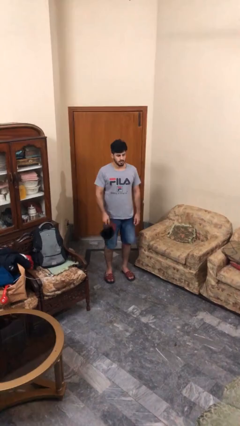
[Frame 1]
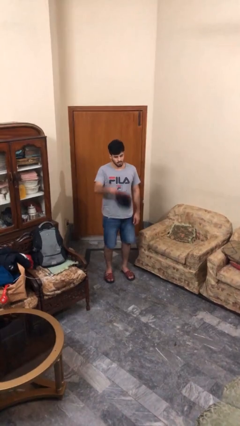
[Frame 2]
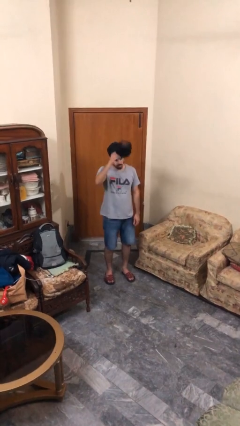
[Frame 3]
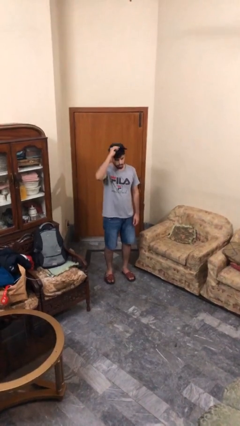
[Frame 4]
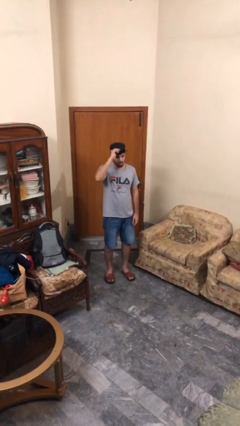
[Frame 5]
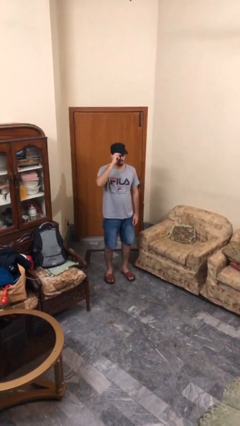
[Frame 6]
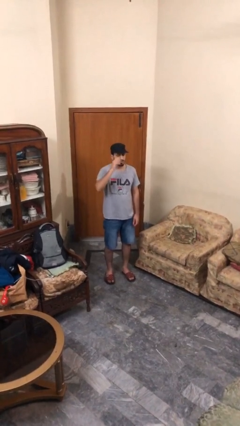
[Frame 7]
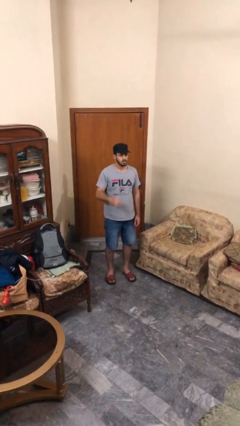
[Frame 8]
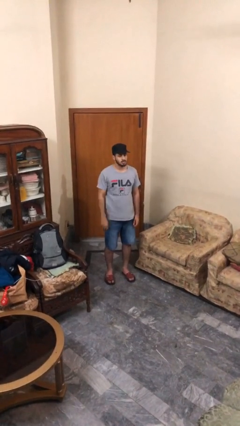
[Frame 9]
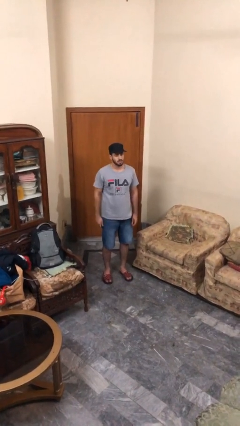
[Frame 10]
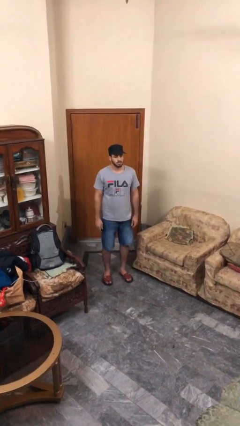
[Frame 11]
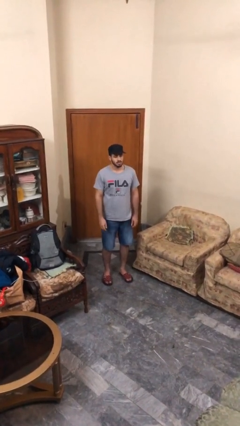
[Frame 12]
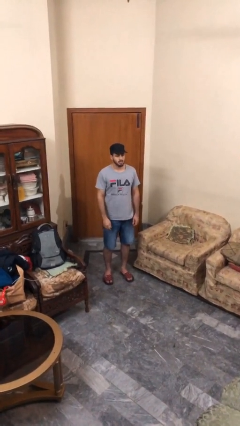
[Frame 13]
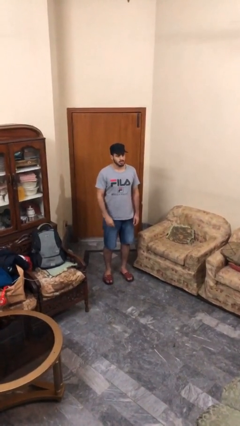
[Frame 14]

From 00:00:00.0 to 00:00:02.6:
person puts on hat

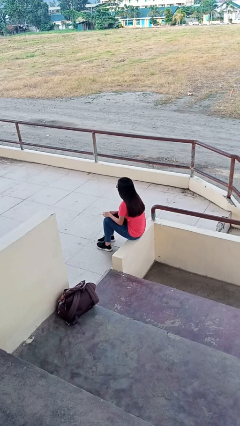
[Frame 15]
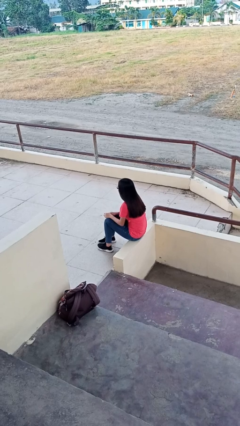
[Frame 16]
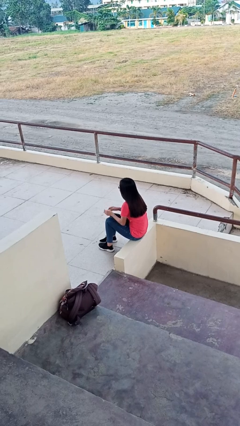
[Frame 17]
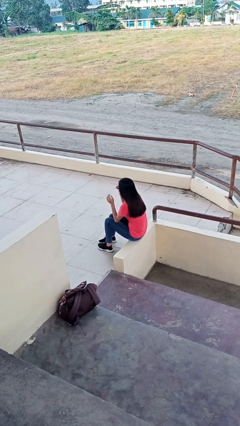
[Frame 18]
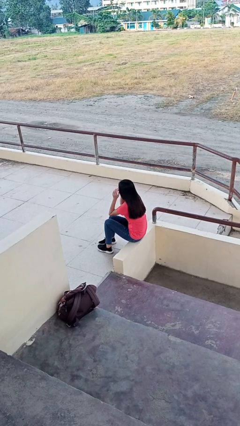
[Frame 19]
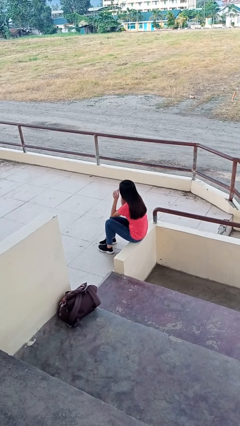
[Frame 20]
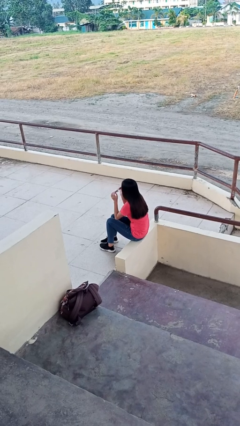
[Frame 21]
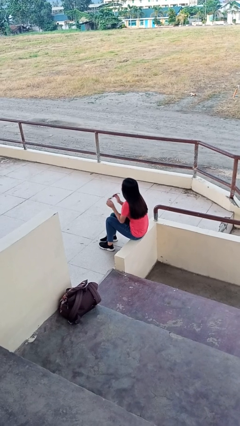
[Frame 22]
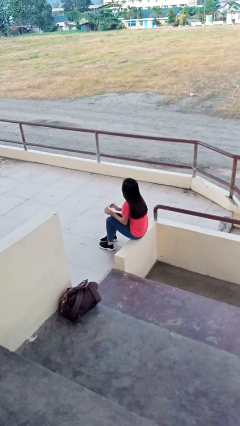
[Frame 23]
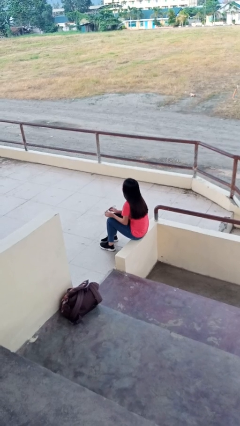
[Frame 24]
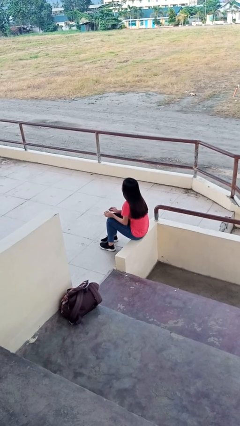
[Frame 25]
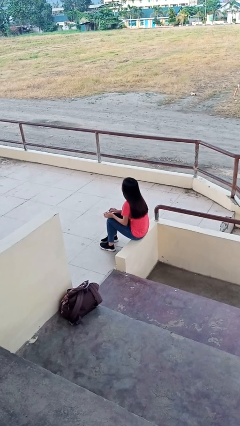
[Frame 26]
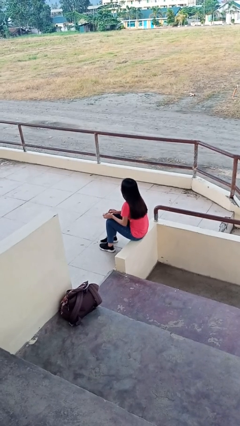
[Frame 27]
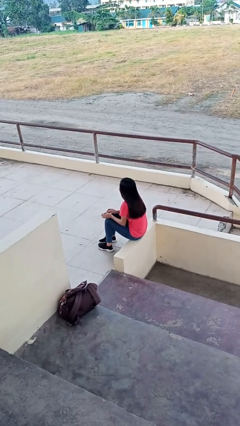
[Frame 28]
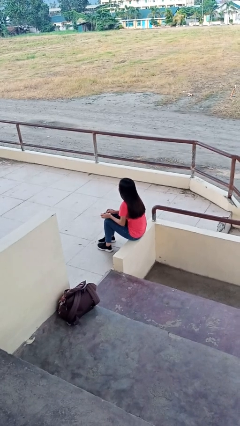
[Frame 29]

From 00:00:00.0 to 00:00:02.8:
person takes off glasses

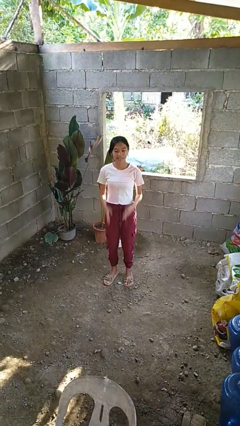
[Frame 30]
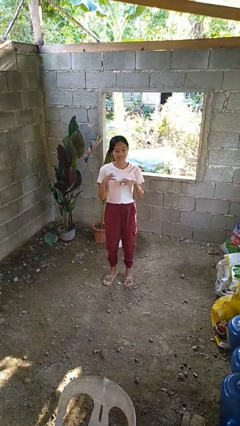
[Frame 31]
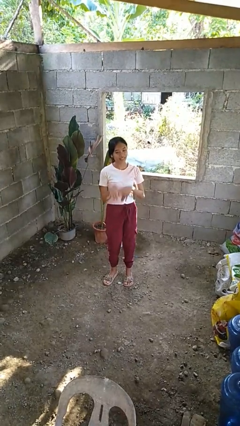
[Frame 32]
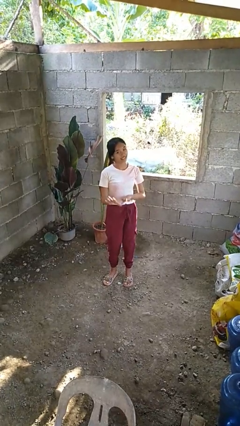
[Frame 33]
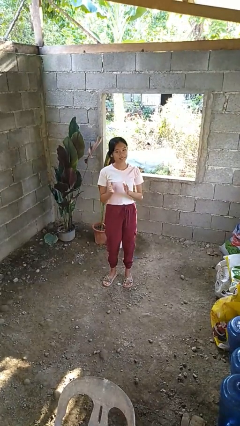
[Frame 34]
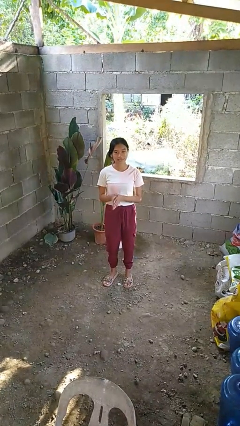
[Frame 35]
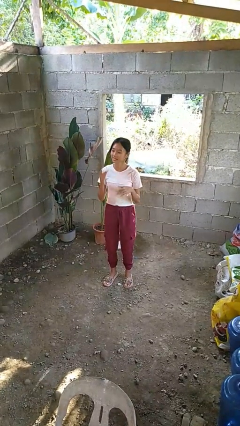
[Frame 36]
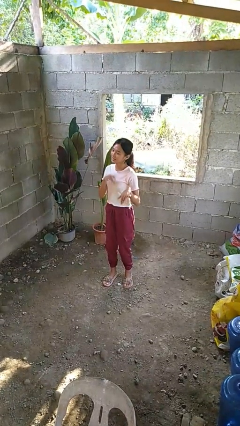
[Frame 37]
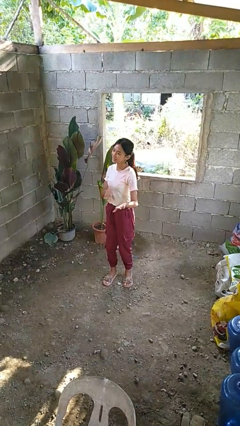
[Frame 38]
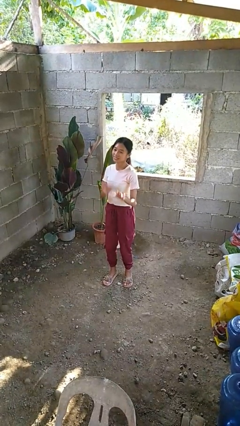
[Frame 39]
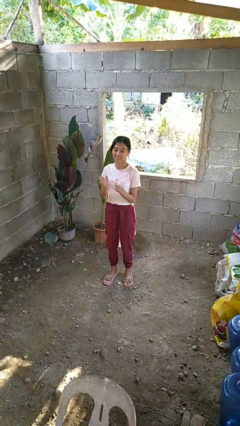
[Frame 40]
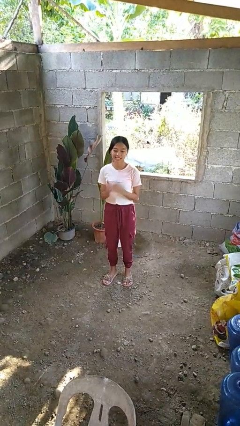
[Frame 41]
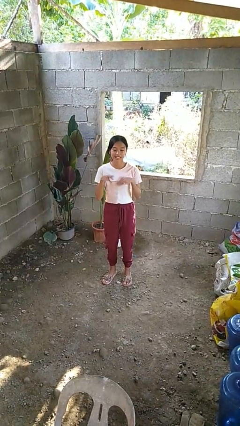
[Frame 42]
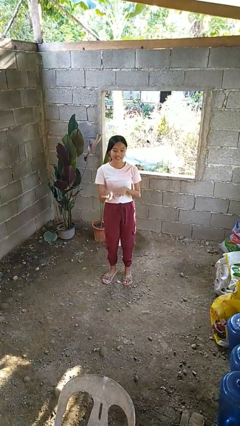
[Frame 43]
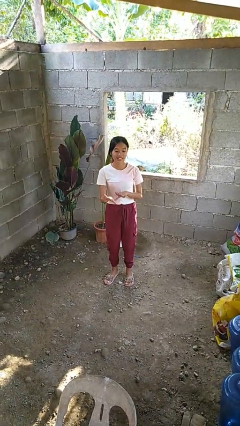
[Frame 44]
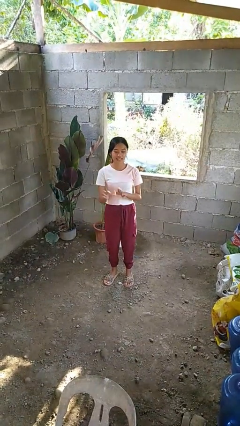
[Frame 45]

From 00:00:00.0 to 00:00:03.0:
person dances in place

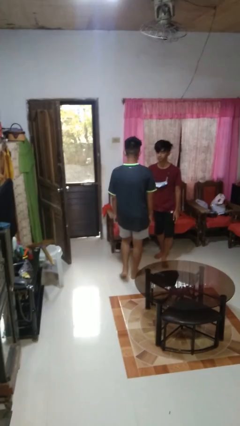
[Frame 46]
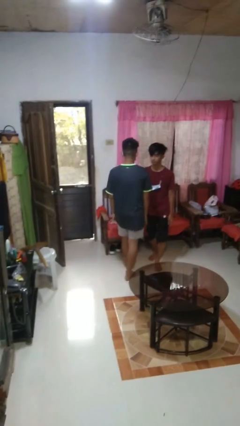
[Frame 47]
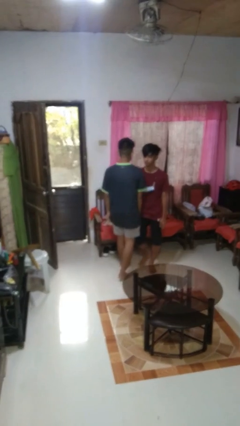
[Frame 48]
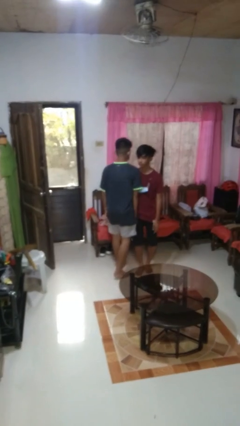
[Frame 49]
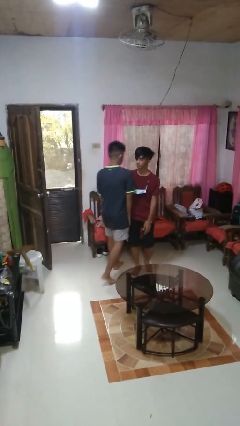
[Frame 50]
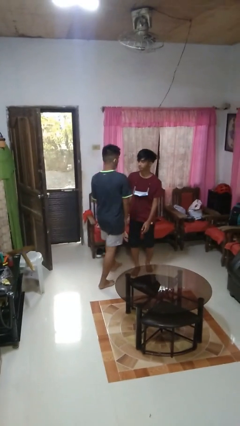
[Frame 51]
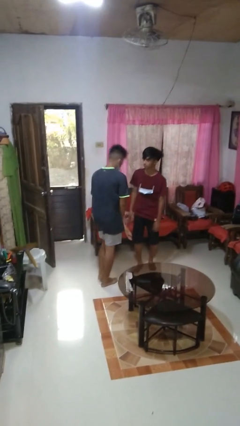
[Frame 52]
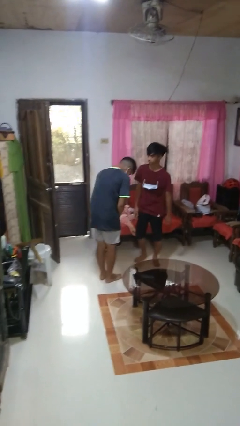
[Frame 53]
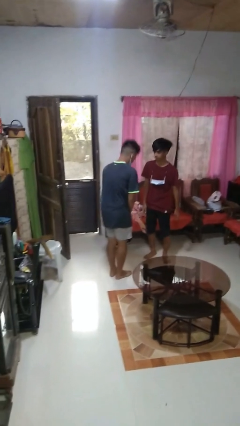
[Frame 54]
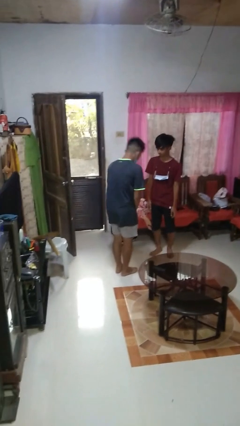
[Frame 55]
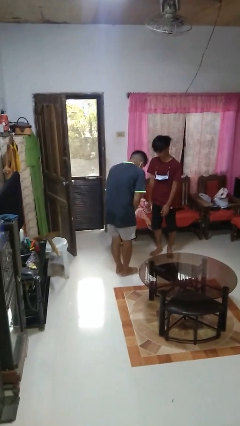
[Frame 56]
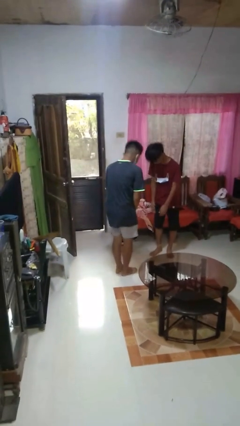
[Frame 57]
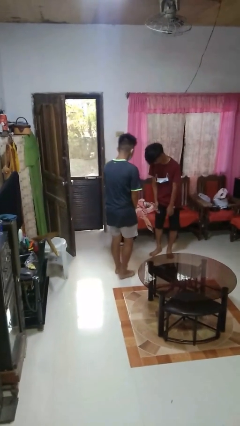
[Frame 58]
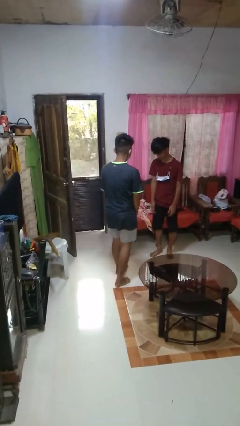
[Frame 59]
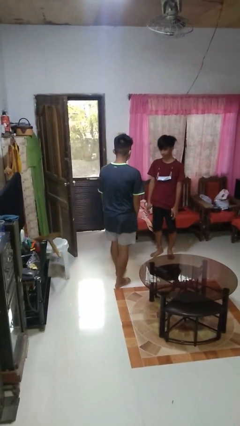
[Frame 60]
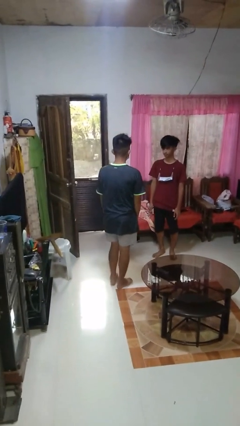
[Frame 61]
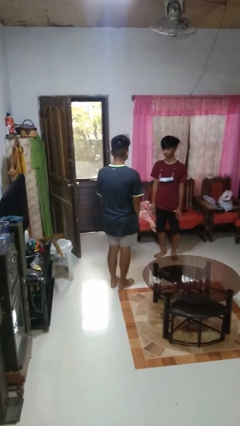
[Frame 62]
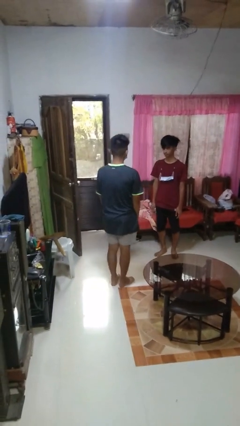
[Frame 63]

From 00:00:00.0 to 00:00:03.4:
person bumps into person

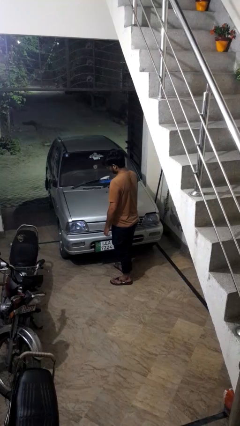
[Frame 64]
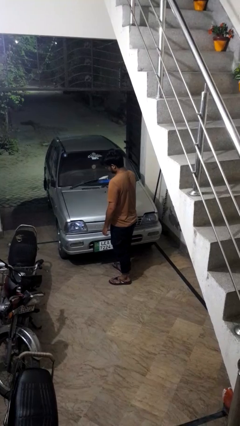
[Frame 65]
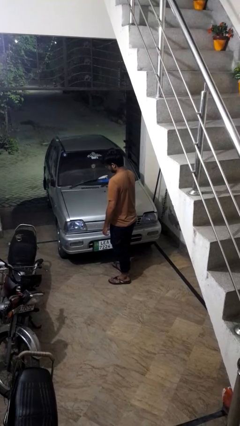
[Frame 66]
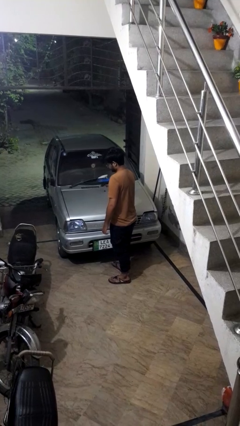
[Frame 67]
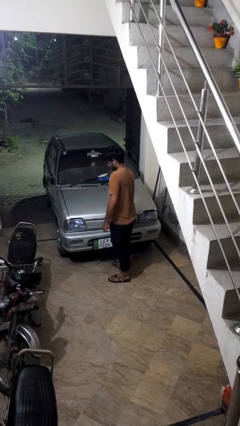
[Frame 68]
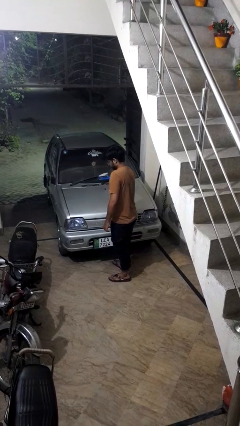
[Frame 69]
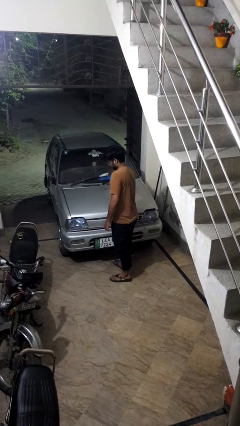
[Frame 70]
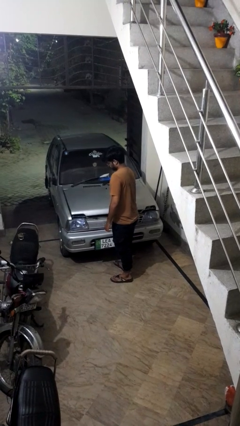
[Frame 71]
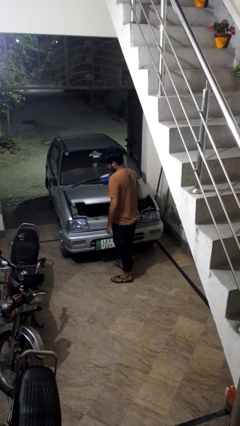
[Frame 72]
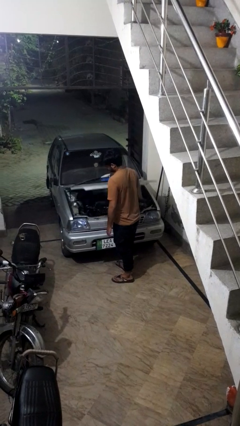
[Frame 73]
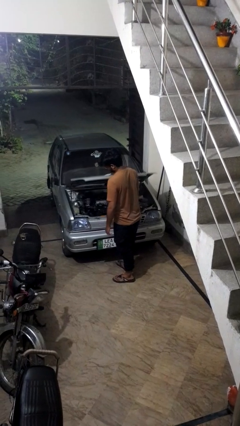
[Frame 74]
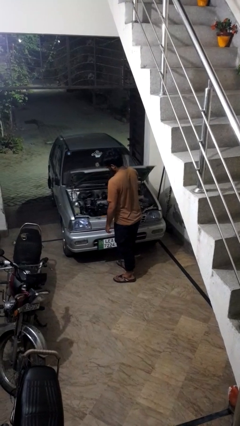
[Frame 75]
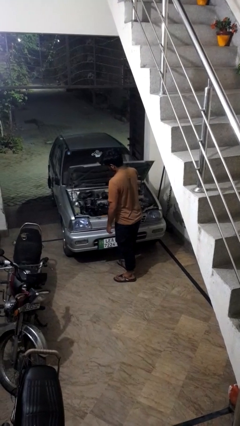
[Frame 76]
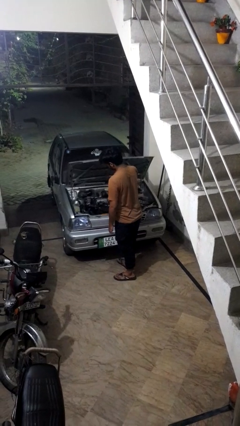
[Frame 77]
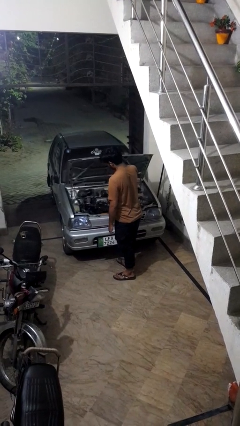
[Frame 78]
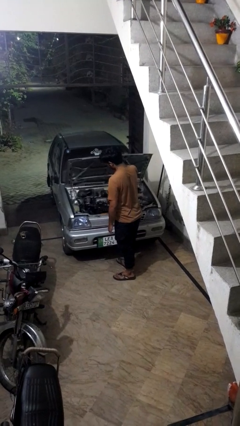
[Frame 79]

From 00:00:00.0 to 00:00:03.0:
person opens car hood

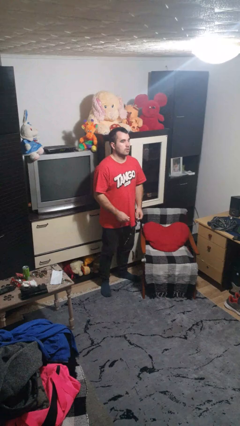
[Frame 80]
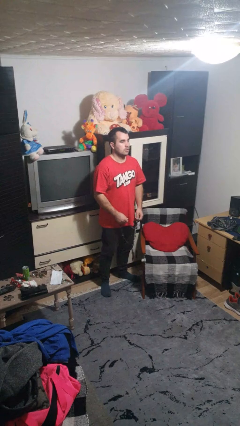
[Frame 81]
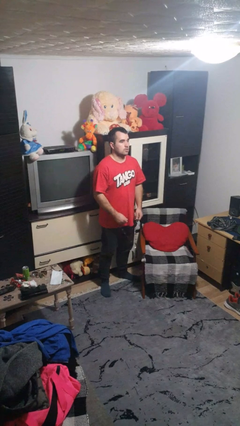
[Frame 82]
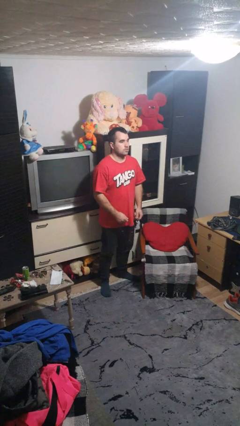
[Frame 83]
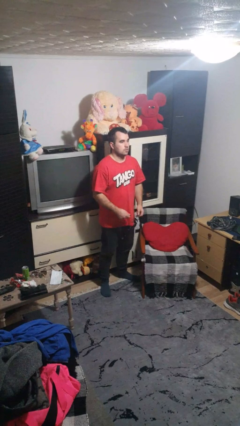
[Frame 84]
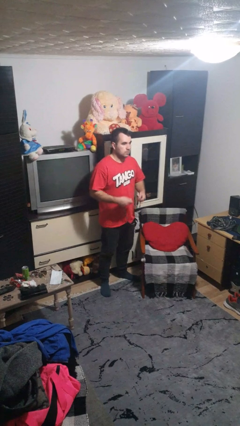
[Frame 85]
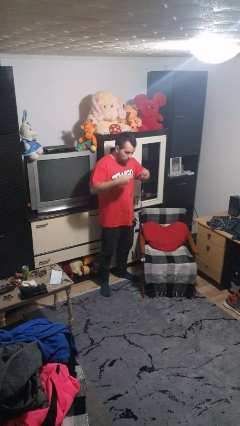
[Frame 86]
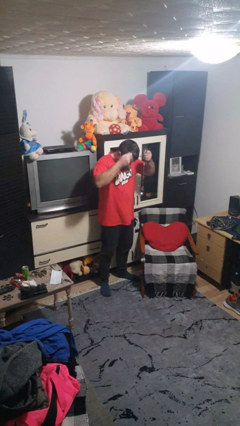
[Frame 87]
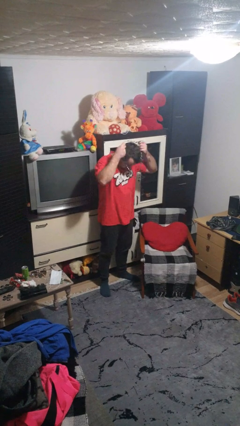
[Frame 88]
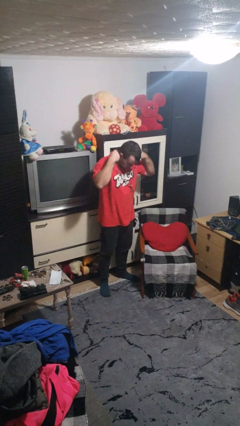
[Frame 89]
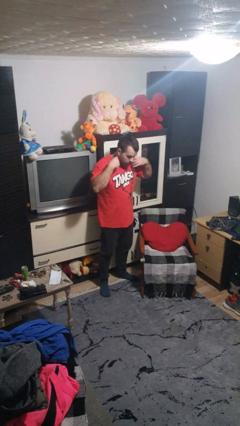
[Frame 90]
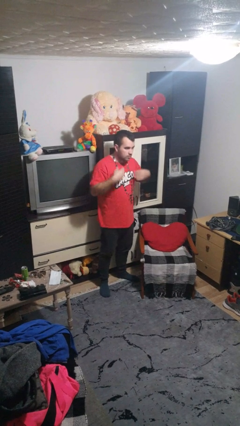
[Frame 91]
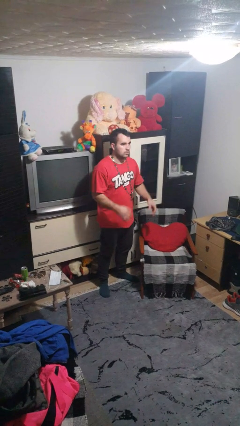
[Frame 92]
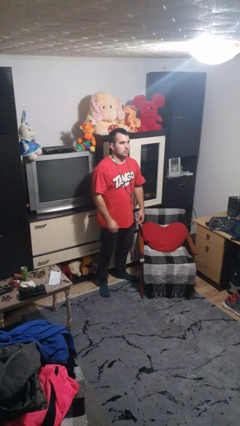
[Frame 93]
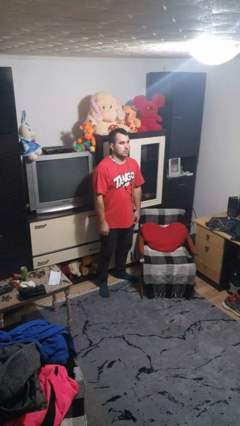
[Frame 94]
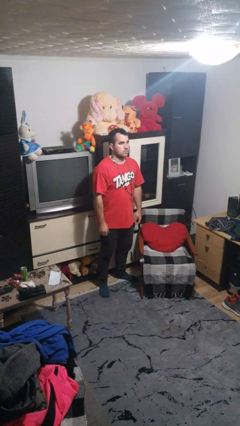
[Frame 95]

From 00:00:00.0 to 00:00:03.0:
person puts on necklace
